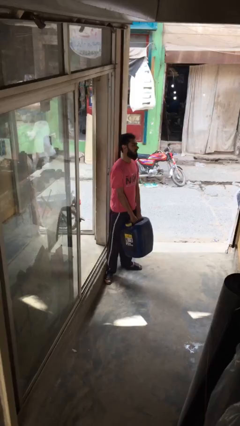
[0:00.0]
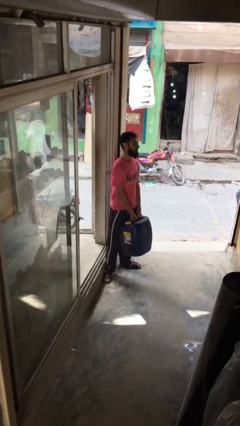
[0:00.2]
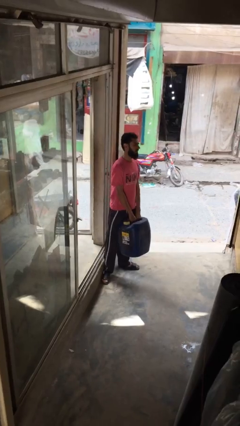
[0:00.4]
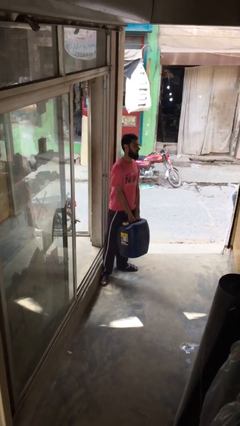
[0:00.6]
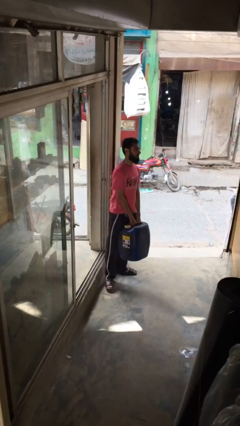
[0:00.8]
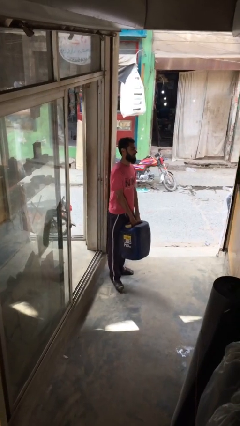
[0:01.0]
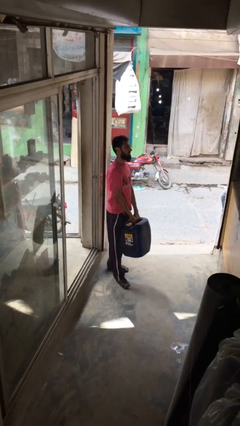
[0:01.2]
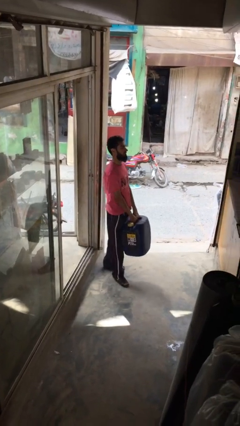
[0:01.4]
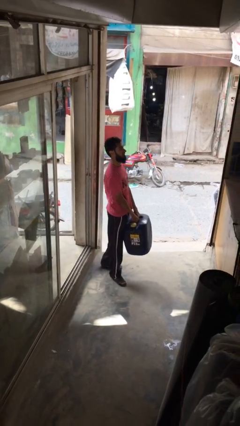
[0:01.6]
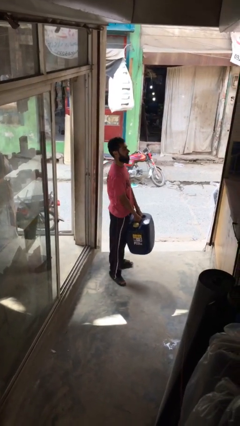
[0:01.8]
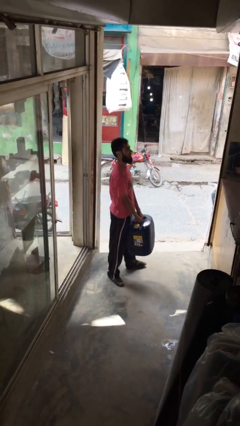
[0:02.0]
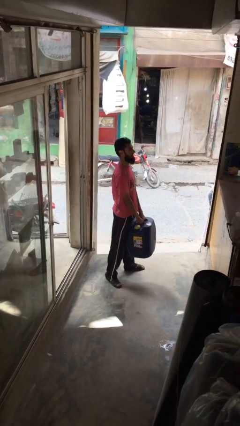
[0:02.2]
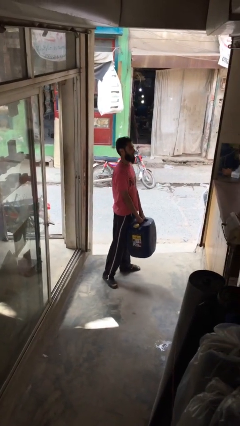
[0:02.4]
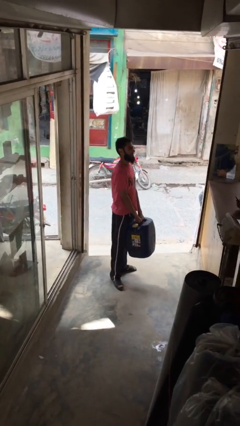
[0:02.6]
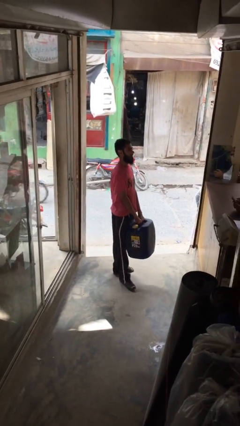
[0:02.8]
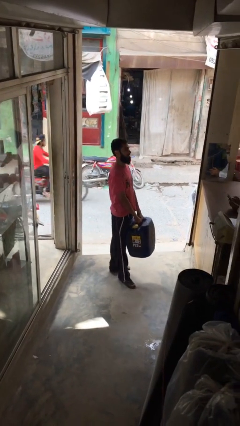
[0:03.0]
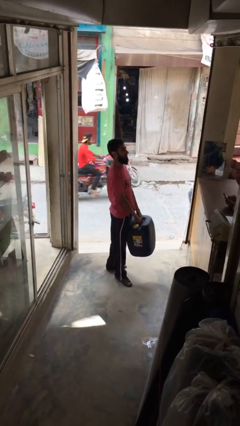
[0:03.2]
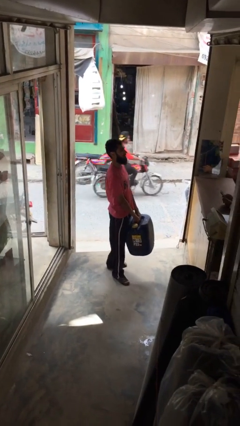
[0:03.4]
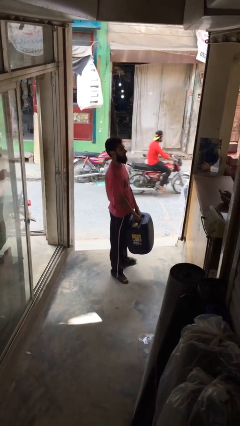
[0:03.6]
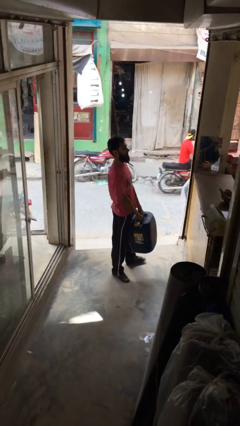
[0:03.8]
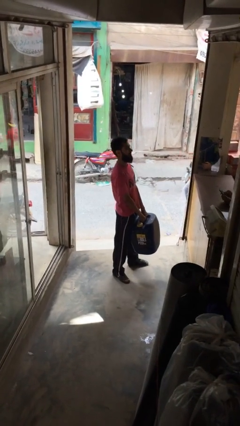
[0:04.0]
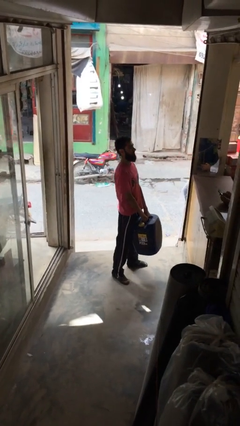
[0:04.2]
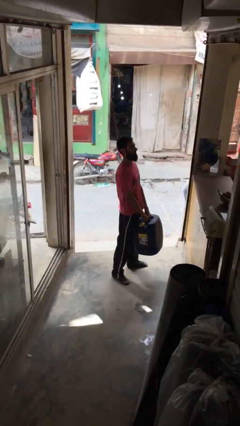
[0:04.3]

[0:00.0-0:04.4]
person carries heavy object

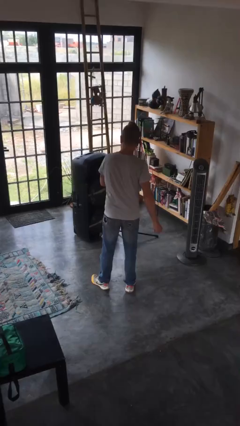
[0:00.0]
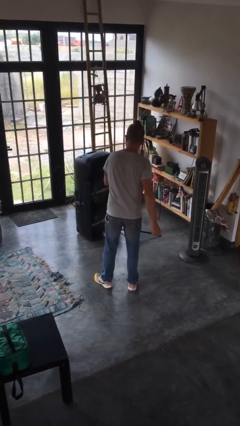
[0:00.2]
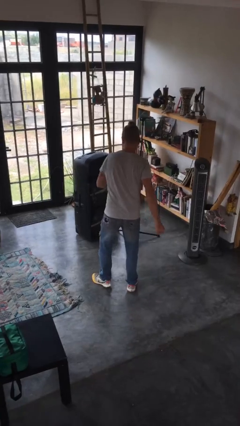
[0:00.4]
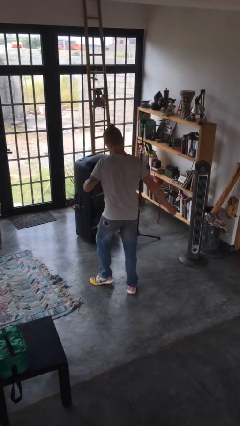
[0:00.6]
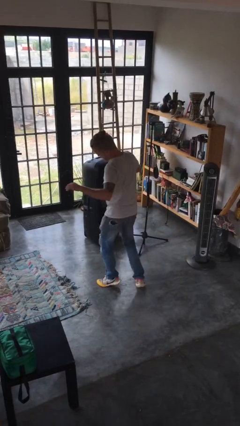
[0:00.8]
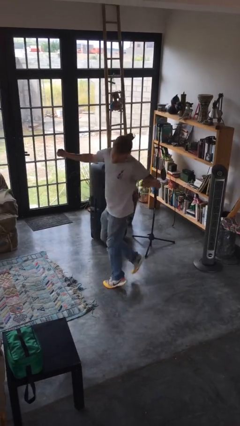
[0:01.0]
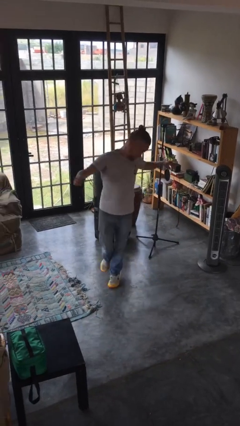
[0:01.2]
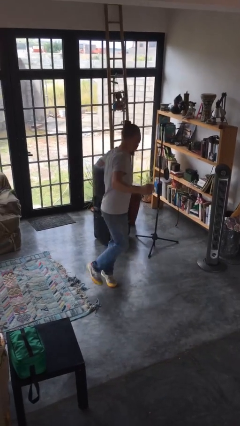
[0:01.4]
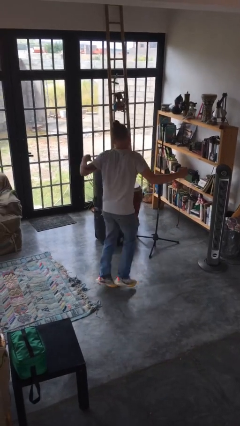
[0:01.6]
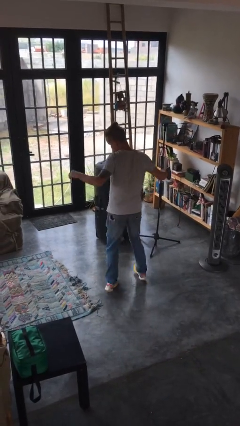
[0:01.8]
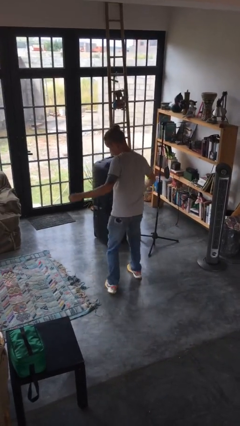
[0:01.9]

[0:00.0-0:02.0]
person twirls

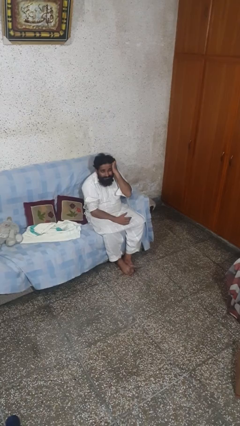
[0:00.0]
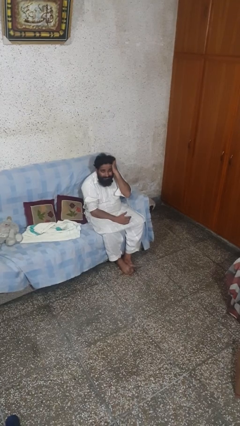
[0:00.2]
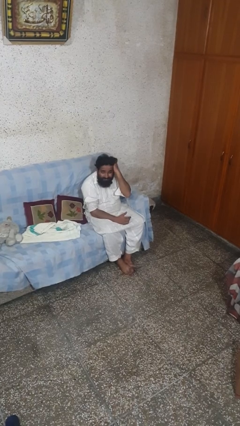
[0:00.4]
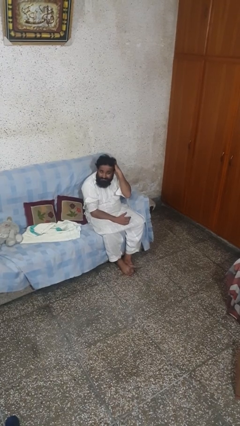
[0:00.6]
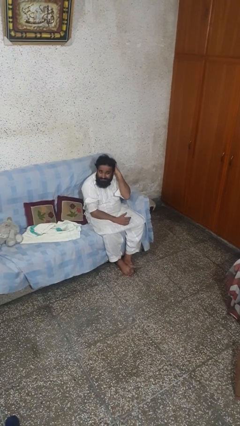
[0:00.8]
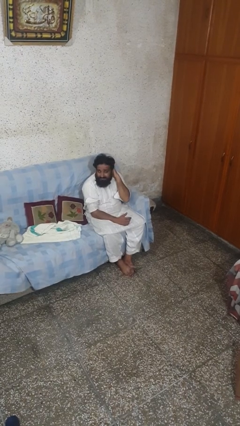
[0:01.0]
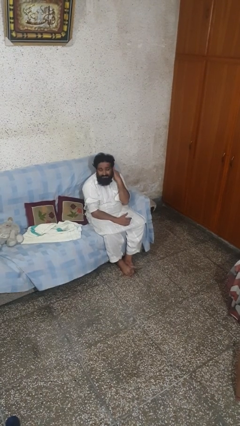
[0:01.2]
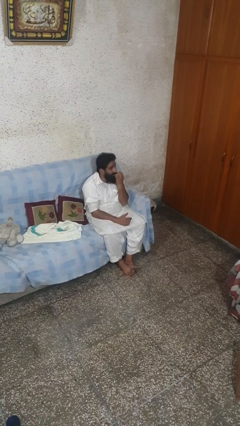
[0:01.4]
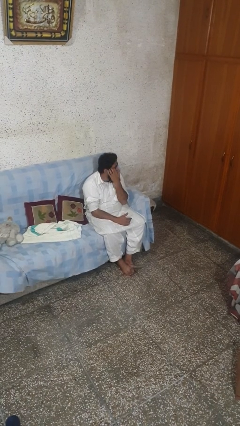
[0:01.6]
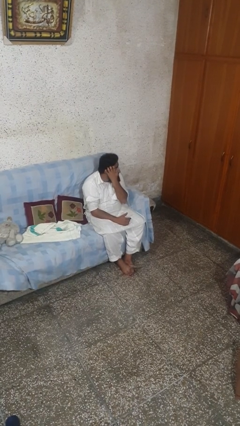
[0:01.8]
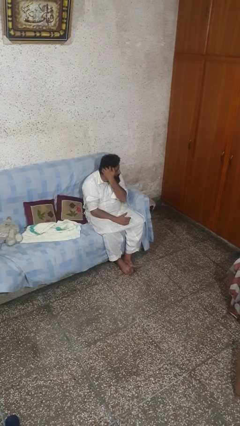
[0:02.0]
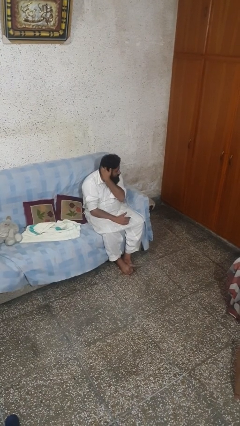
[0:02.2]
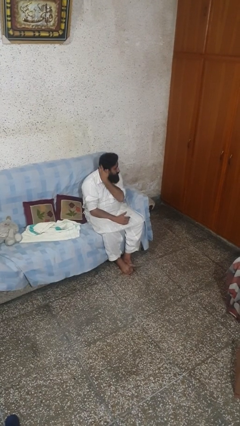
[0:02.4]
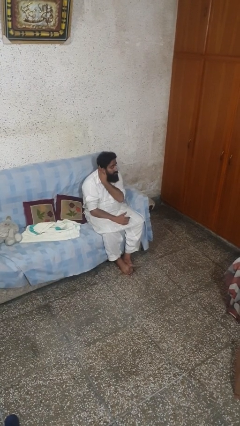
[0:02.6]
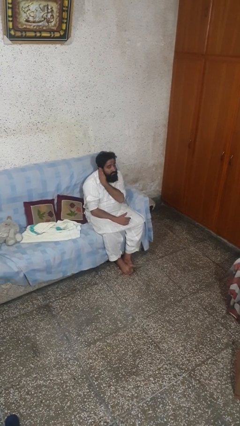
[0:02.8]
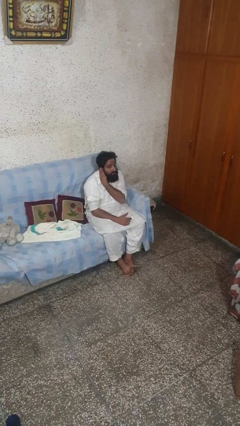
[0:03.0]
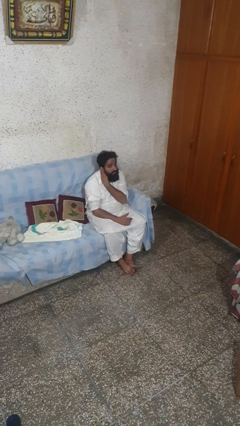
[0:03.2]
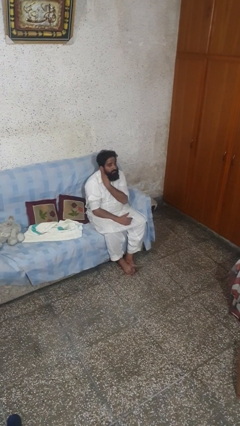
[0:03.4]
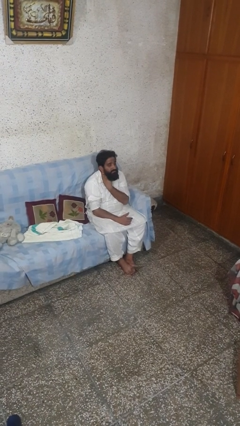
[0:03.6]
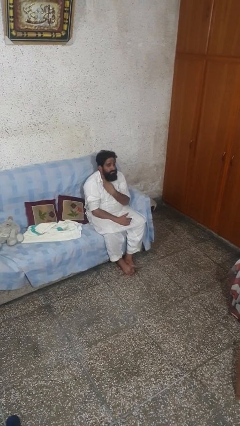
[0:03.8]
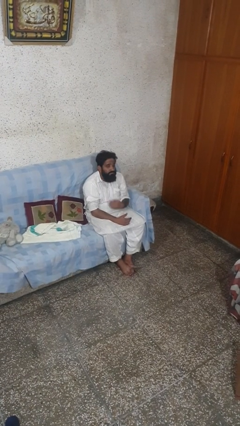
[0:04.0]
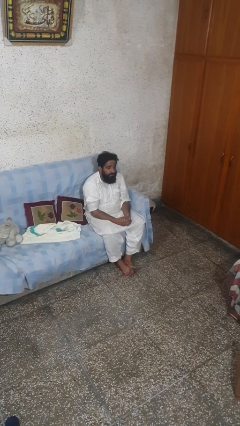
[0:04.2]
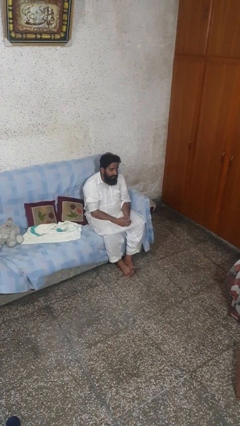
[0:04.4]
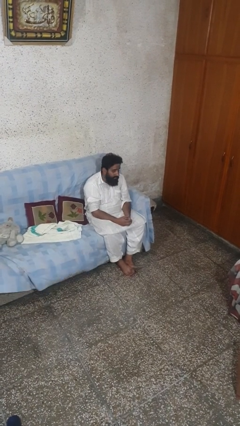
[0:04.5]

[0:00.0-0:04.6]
person strokes hair

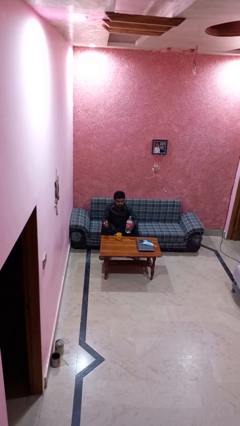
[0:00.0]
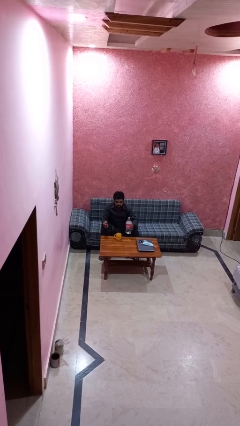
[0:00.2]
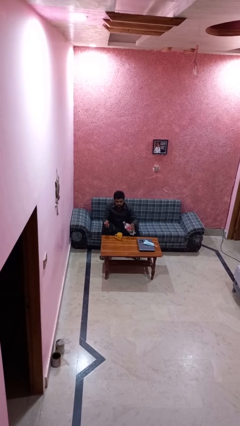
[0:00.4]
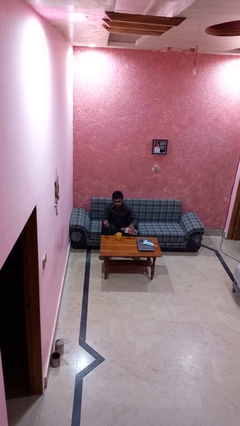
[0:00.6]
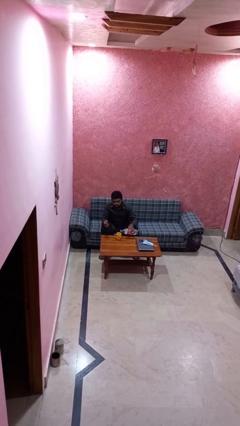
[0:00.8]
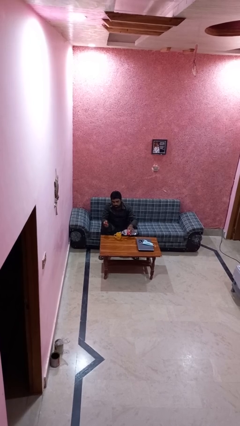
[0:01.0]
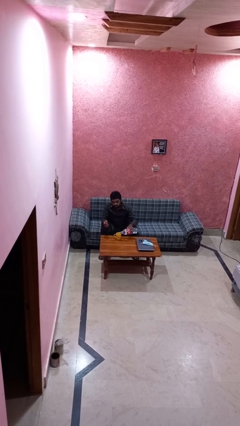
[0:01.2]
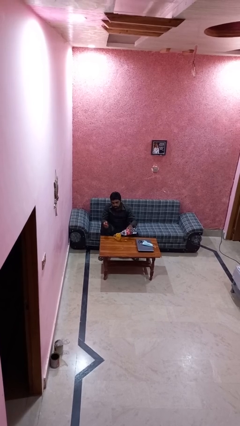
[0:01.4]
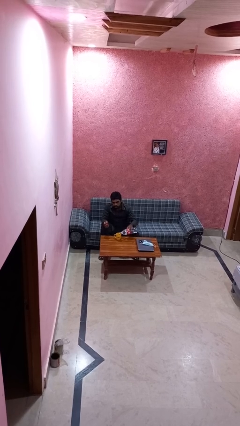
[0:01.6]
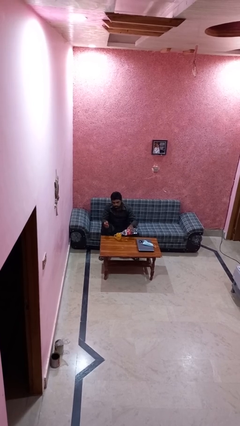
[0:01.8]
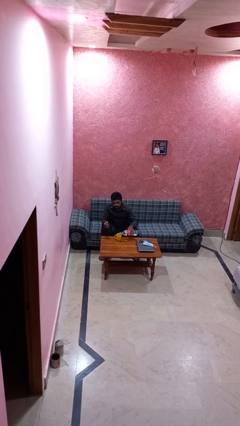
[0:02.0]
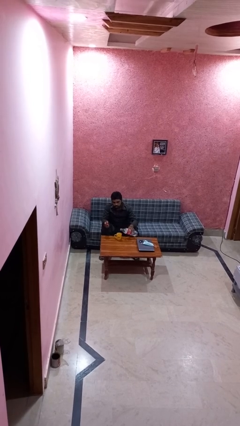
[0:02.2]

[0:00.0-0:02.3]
person pours liquid into cup

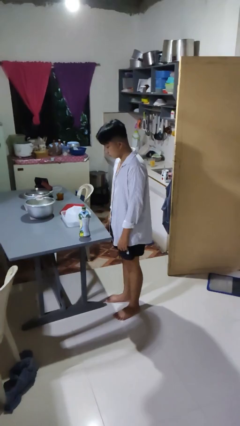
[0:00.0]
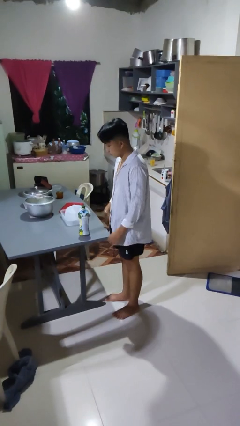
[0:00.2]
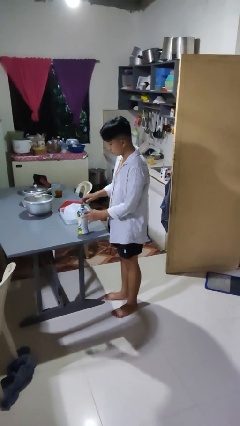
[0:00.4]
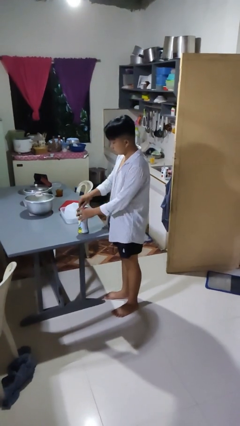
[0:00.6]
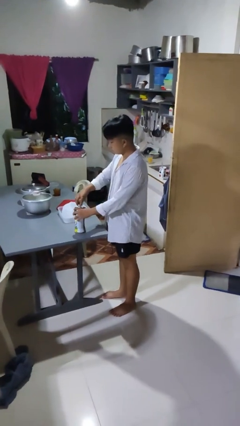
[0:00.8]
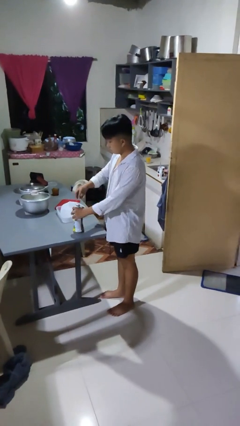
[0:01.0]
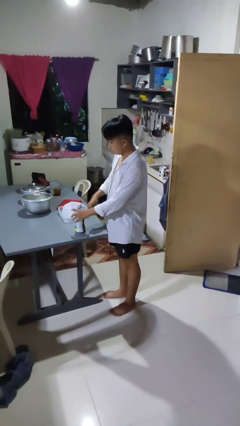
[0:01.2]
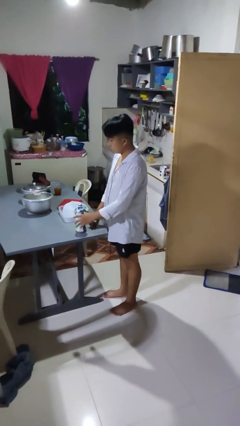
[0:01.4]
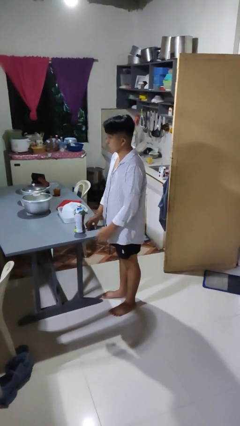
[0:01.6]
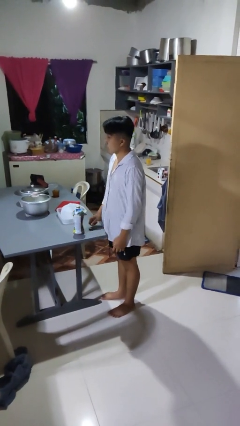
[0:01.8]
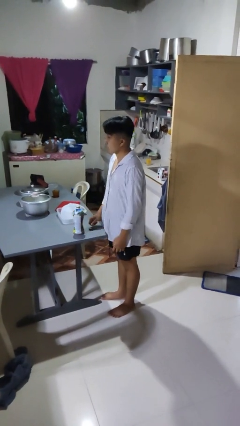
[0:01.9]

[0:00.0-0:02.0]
person unscrews lid from bottle

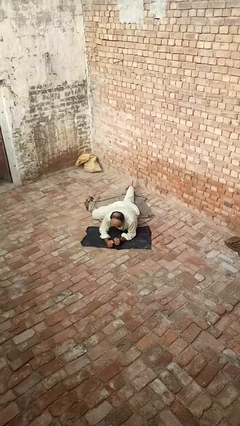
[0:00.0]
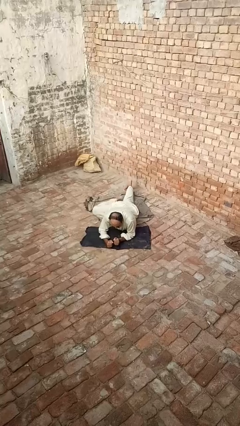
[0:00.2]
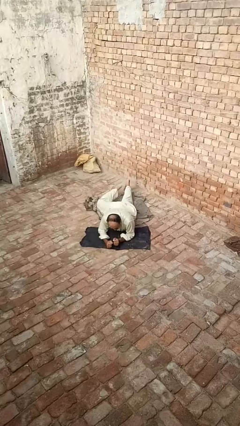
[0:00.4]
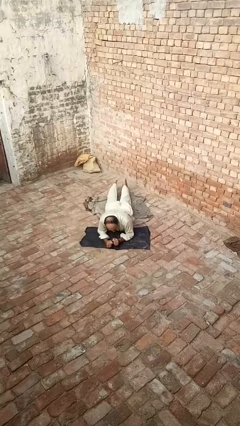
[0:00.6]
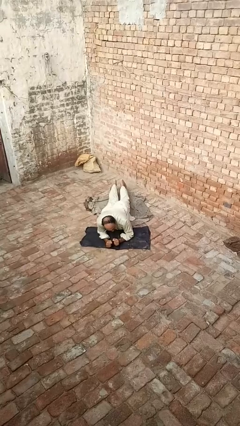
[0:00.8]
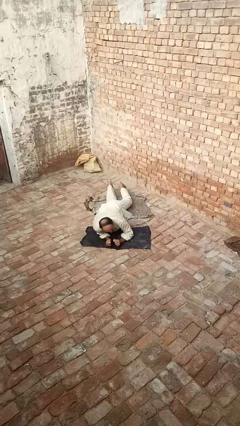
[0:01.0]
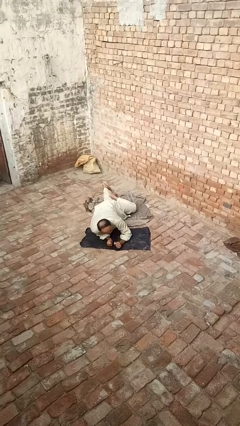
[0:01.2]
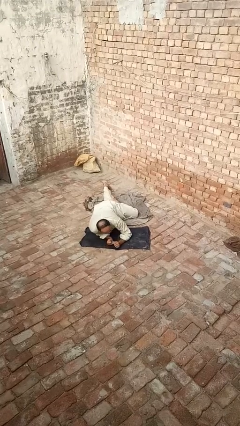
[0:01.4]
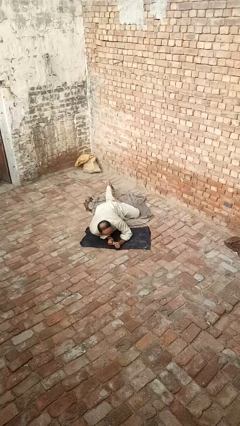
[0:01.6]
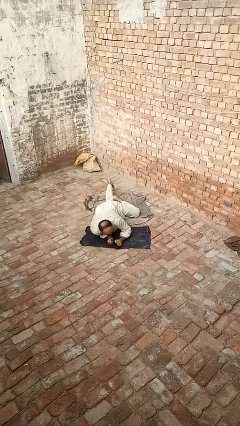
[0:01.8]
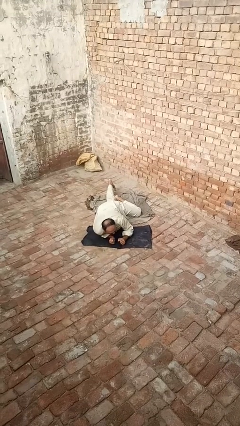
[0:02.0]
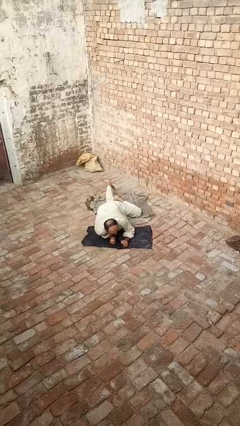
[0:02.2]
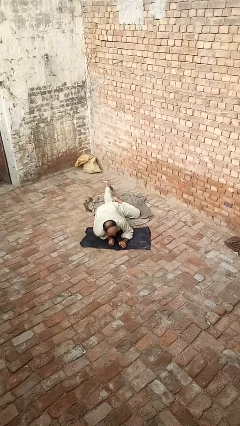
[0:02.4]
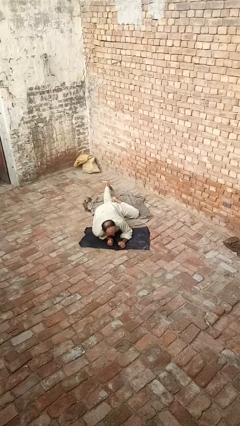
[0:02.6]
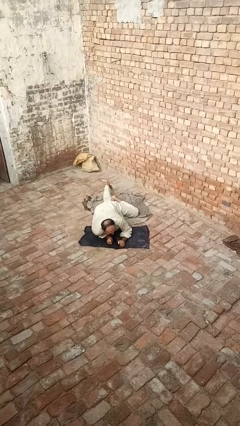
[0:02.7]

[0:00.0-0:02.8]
person crawls
